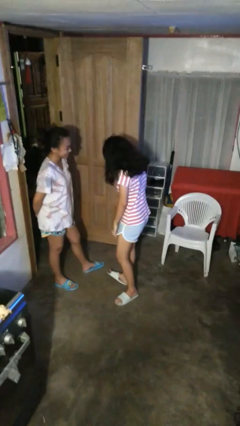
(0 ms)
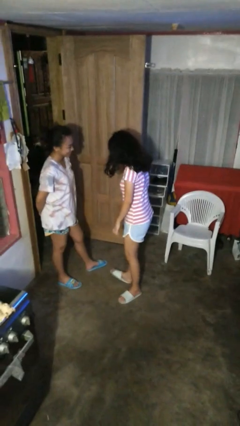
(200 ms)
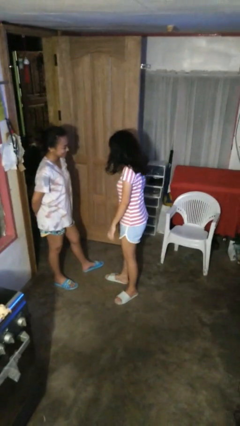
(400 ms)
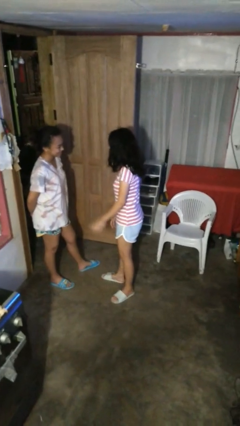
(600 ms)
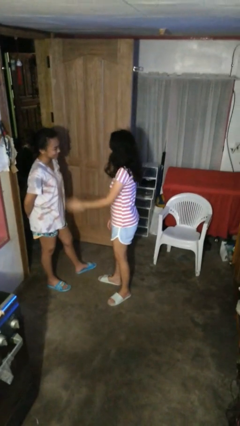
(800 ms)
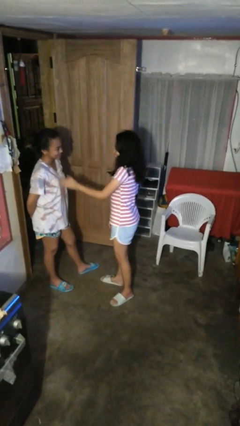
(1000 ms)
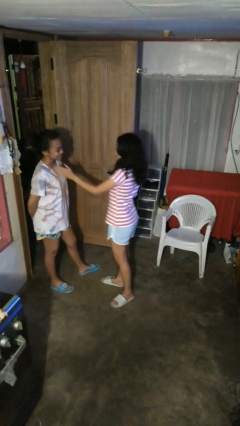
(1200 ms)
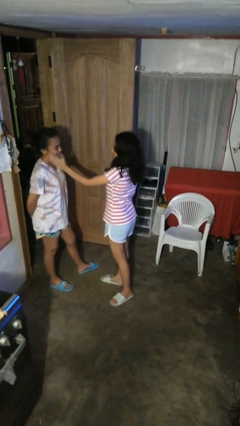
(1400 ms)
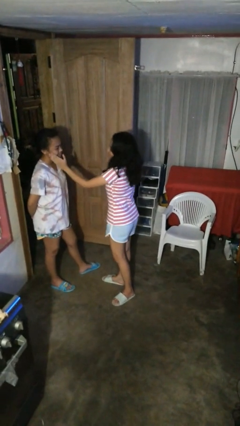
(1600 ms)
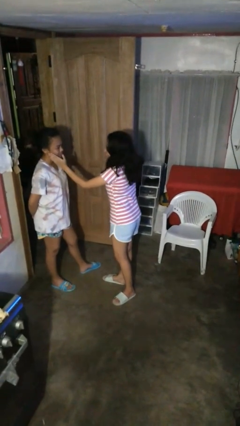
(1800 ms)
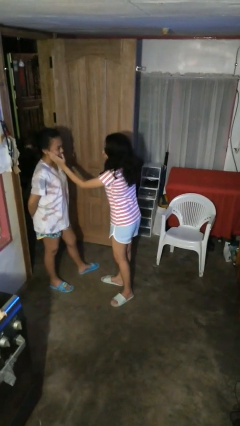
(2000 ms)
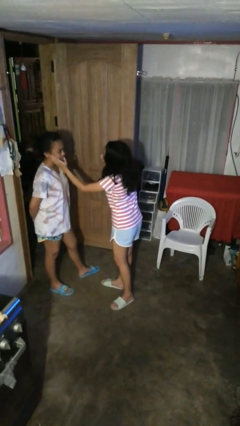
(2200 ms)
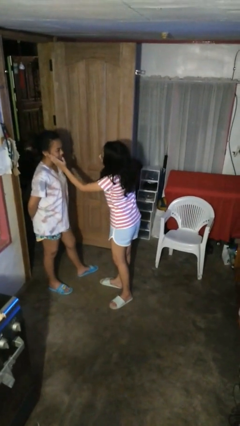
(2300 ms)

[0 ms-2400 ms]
person touches face of person

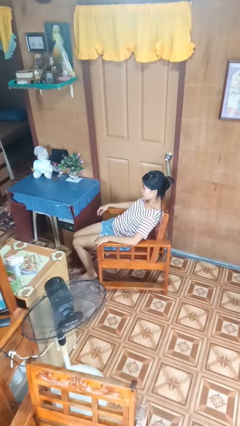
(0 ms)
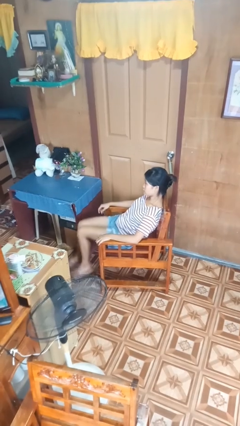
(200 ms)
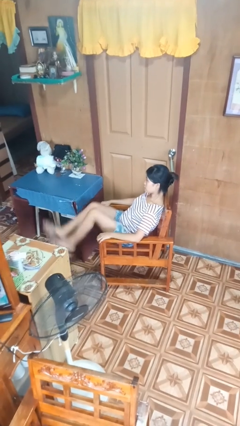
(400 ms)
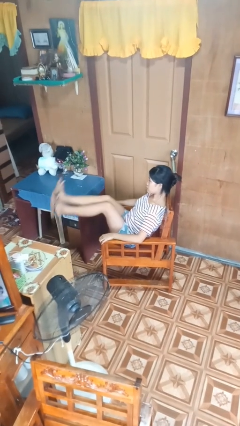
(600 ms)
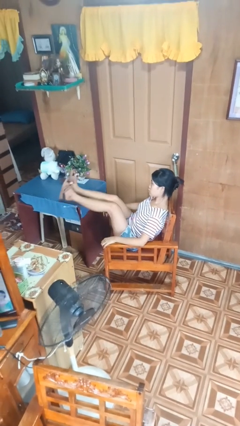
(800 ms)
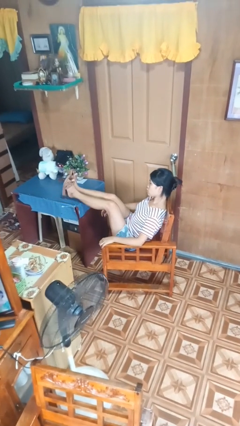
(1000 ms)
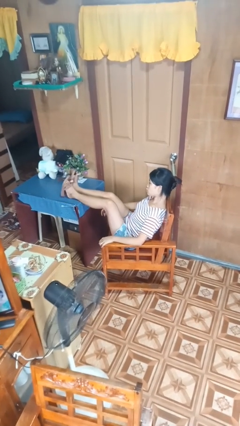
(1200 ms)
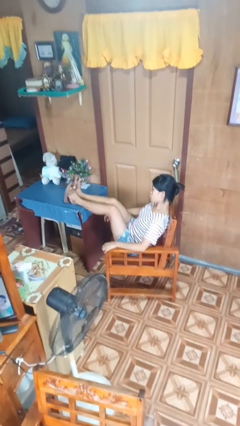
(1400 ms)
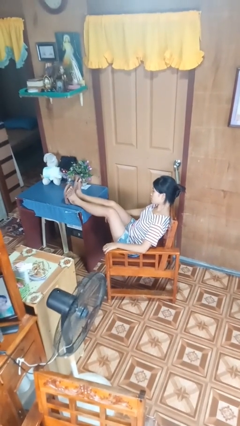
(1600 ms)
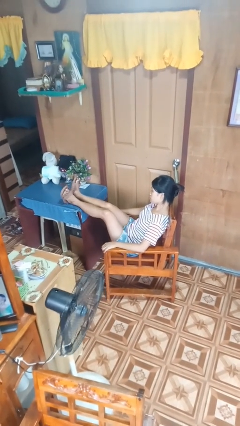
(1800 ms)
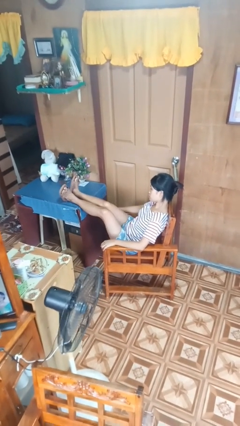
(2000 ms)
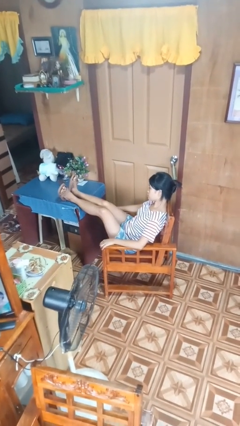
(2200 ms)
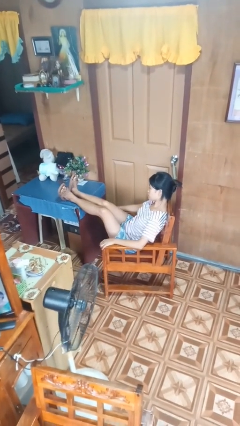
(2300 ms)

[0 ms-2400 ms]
person puts feet up

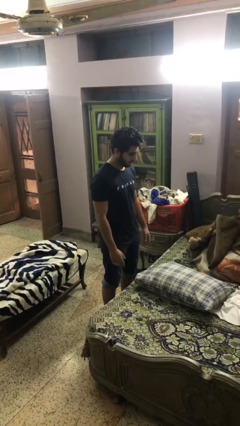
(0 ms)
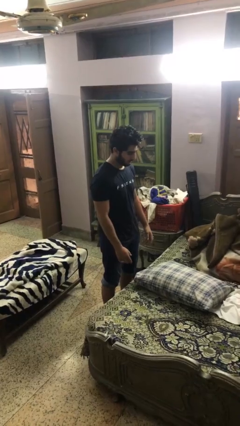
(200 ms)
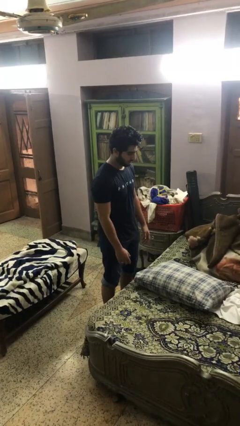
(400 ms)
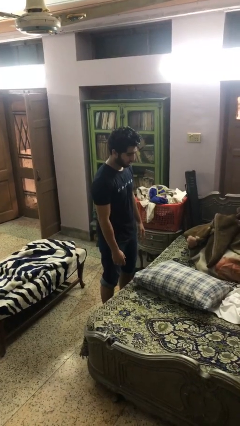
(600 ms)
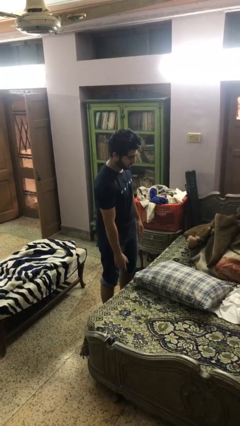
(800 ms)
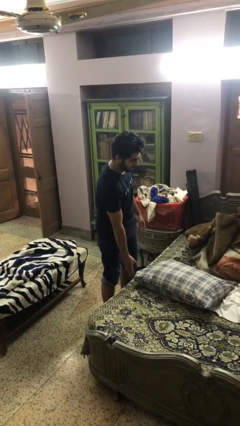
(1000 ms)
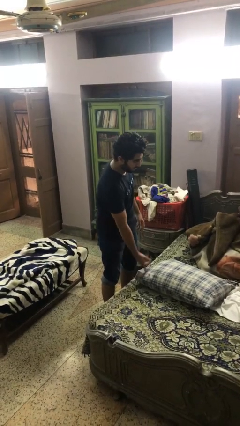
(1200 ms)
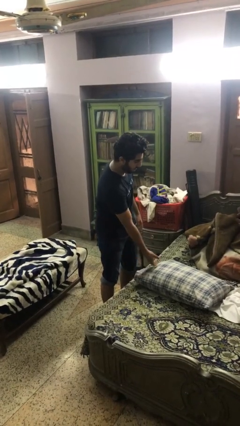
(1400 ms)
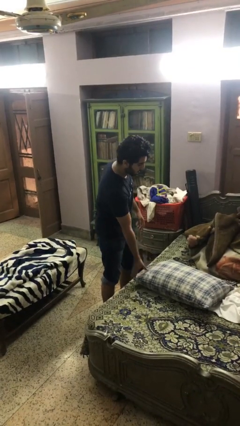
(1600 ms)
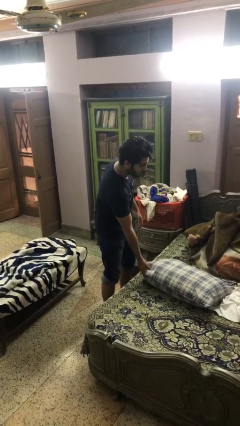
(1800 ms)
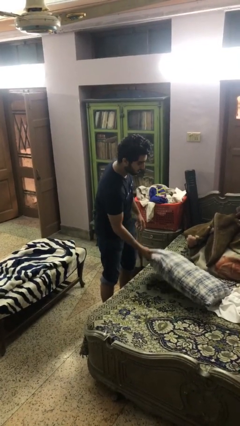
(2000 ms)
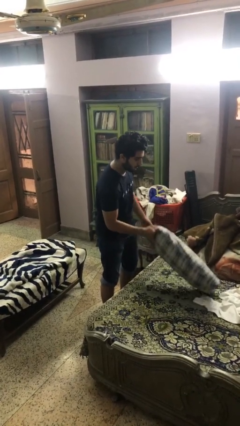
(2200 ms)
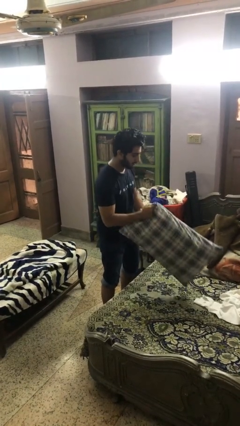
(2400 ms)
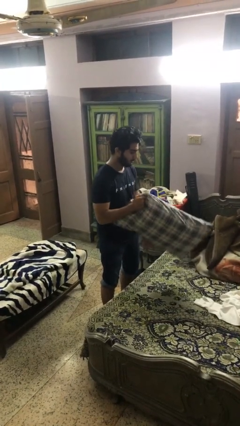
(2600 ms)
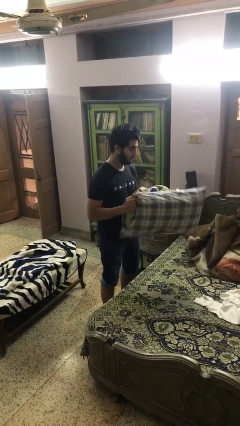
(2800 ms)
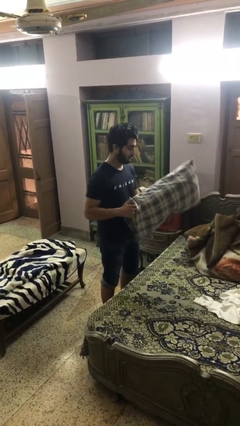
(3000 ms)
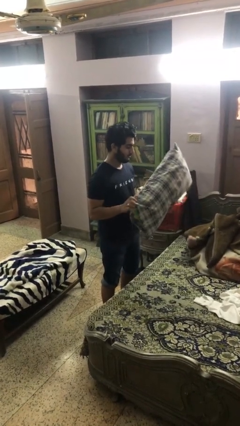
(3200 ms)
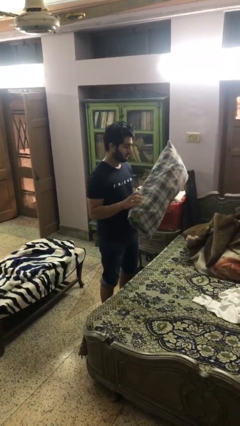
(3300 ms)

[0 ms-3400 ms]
person picks up object from bed

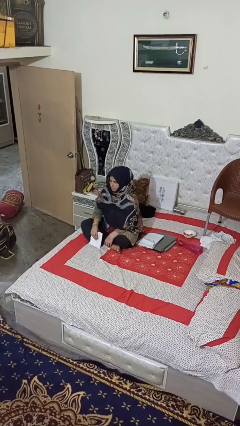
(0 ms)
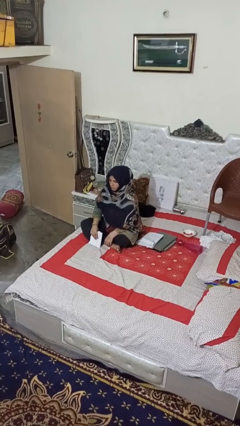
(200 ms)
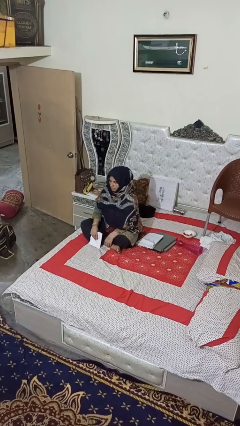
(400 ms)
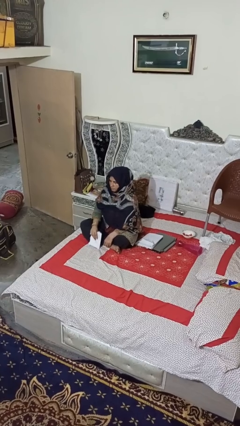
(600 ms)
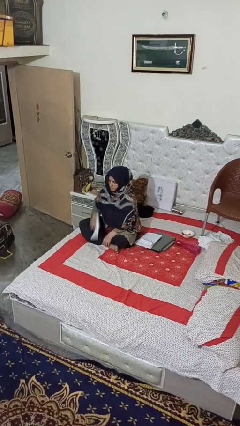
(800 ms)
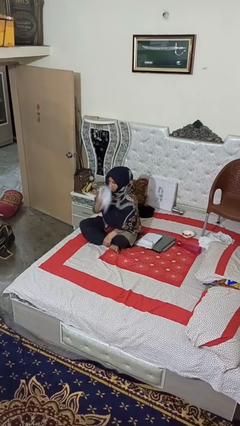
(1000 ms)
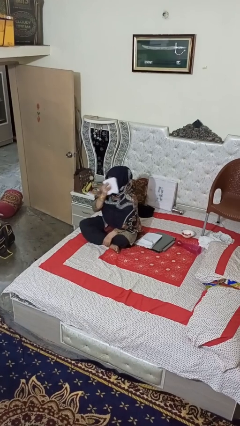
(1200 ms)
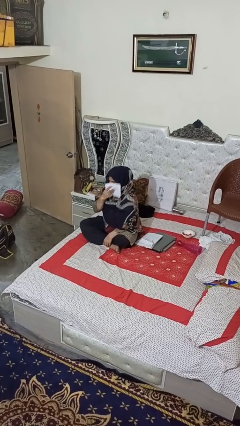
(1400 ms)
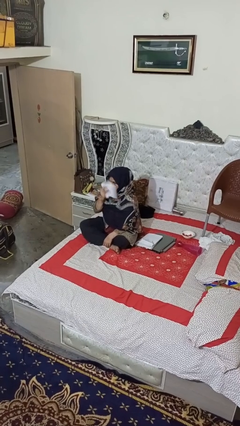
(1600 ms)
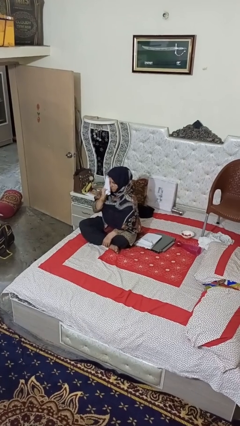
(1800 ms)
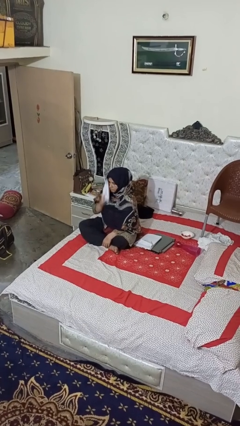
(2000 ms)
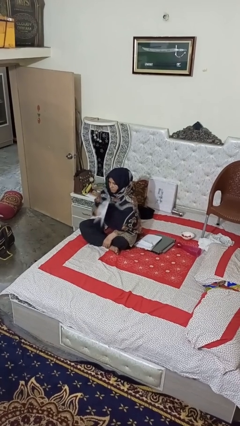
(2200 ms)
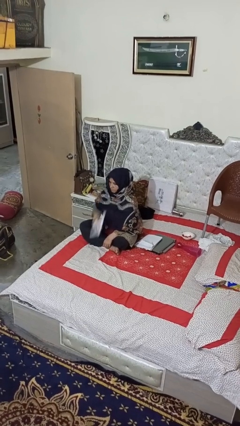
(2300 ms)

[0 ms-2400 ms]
person wipes mouth with napkin

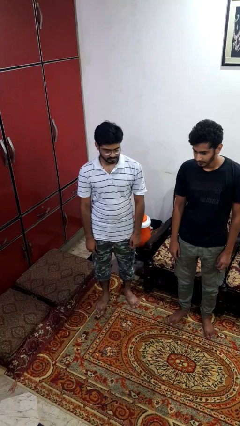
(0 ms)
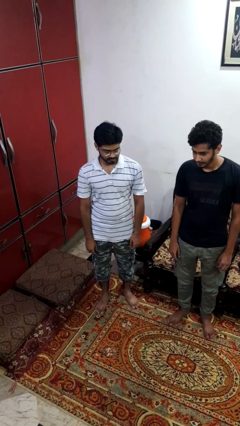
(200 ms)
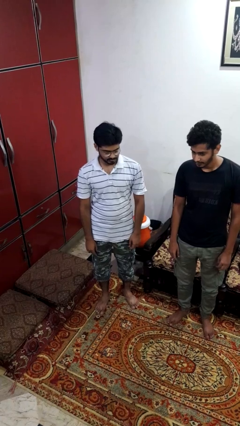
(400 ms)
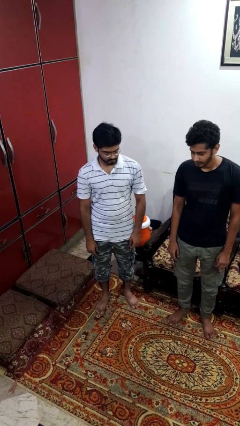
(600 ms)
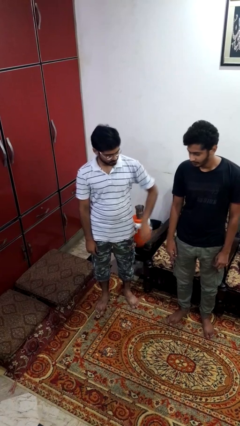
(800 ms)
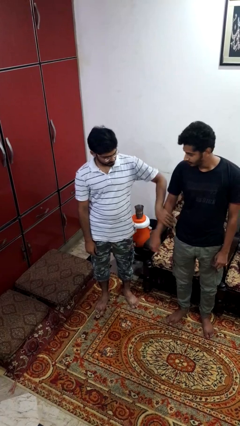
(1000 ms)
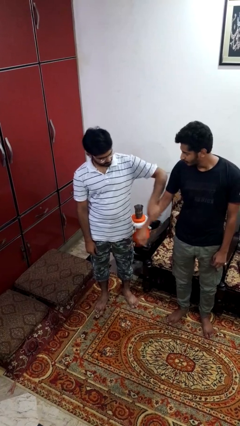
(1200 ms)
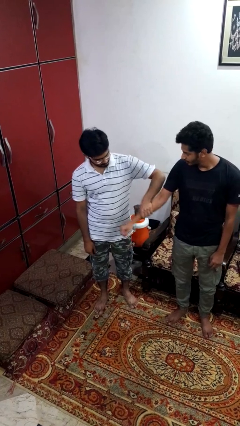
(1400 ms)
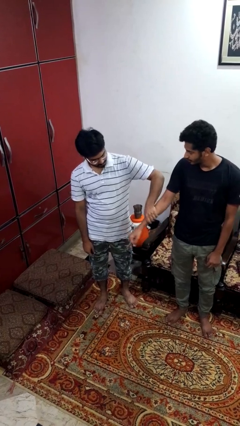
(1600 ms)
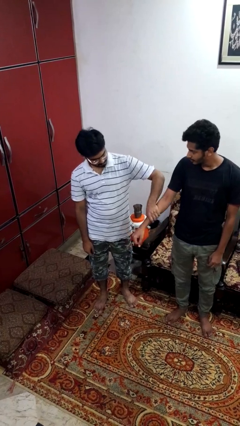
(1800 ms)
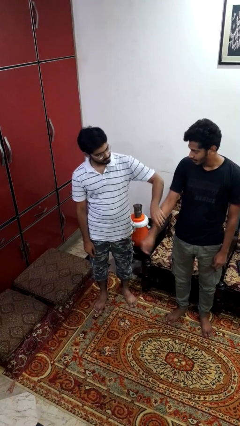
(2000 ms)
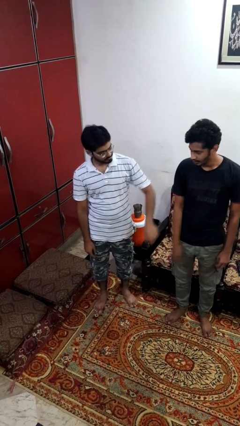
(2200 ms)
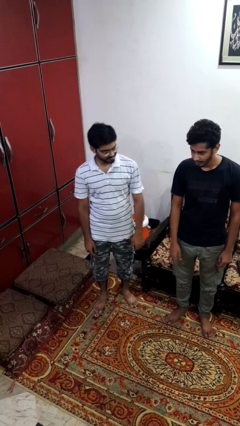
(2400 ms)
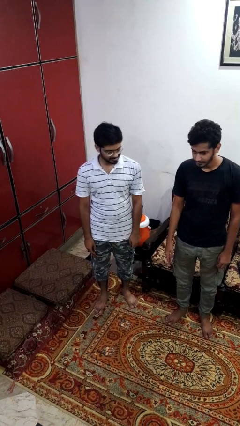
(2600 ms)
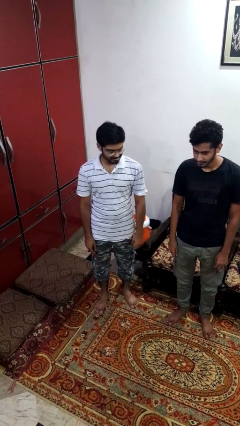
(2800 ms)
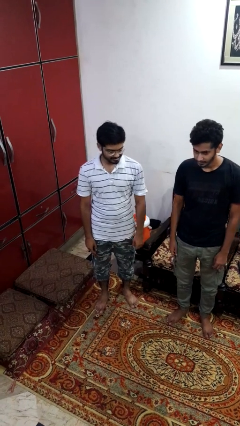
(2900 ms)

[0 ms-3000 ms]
person grabs person by forearm

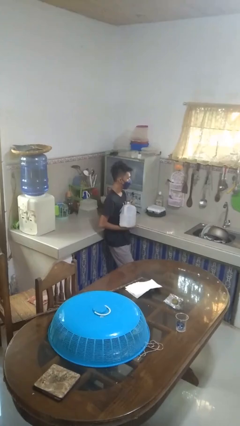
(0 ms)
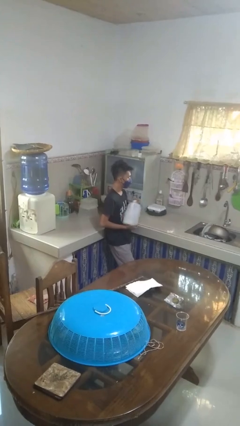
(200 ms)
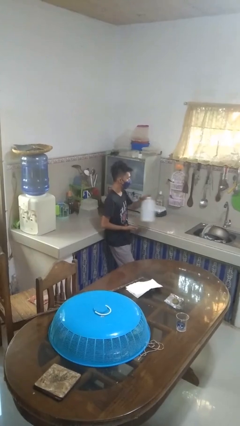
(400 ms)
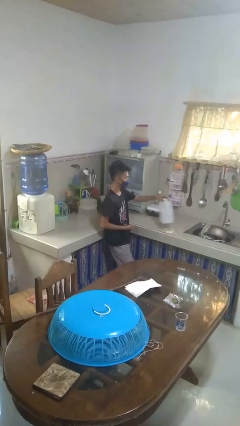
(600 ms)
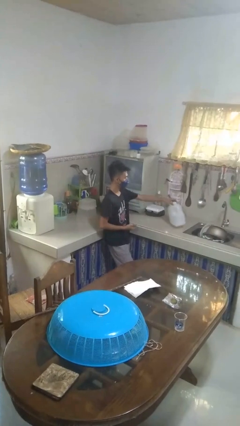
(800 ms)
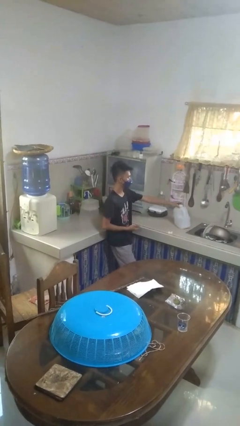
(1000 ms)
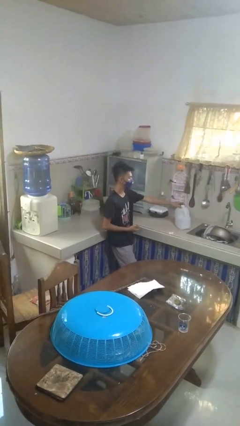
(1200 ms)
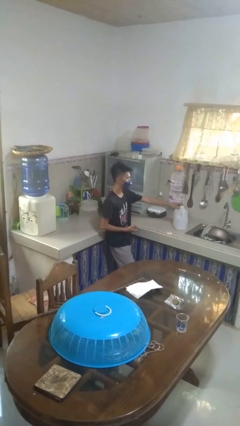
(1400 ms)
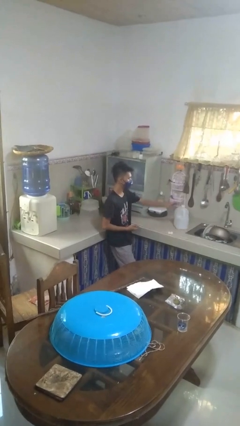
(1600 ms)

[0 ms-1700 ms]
person puts down object on countertop

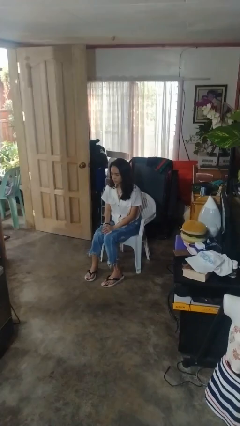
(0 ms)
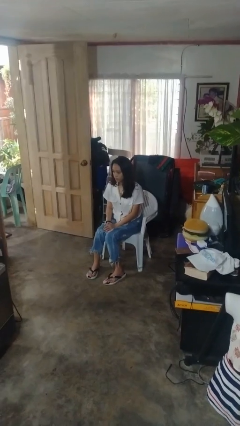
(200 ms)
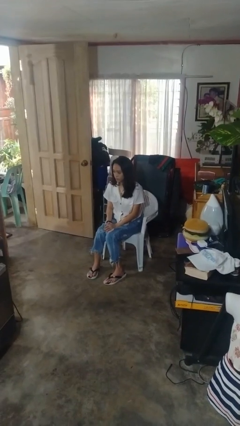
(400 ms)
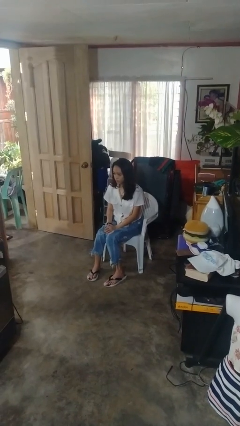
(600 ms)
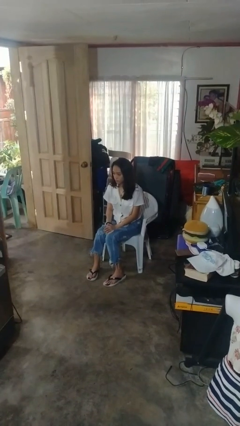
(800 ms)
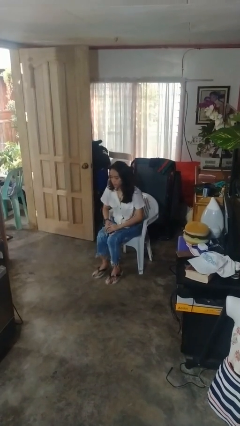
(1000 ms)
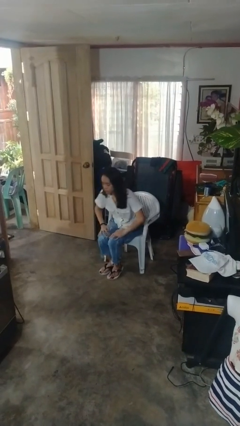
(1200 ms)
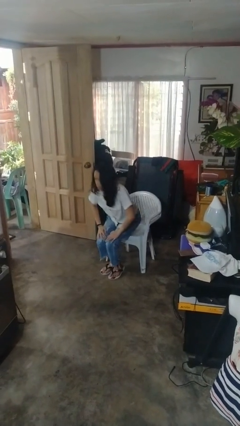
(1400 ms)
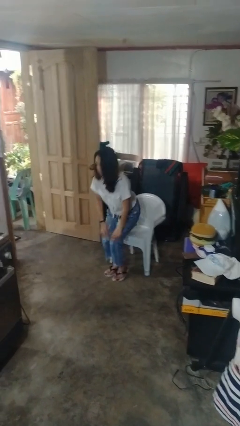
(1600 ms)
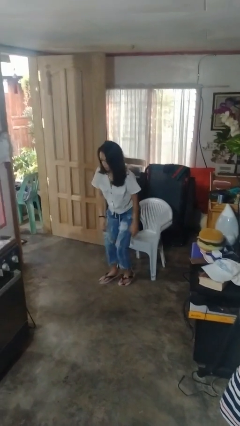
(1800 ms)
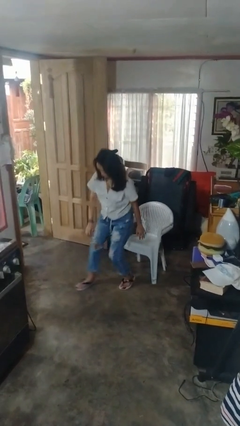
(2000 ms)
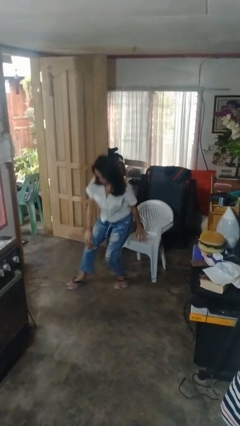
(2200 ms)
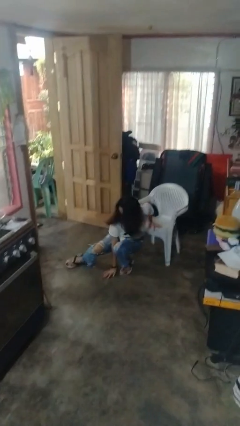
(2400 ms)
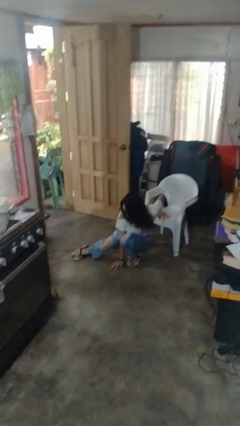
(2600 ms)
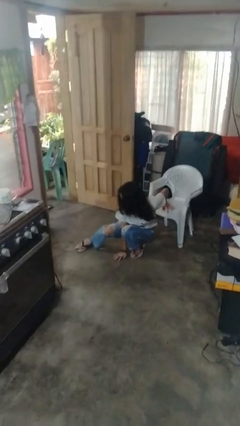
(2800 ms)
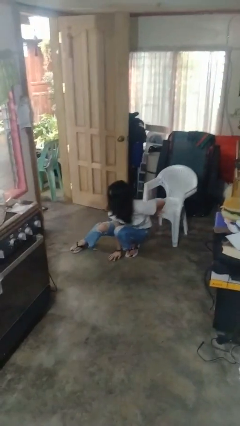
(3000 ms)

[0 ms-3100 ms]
person falls from chair
